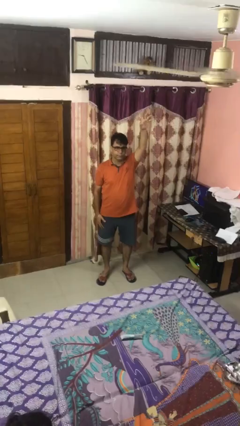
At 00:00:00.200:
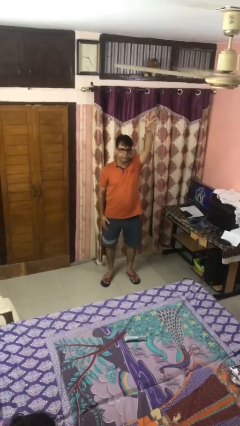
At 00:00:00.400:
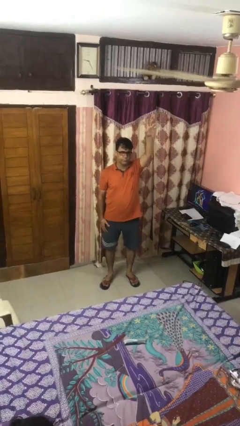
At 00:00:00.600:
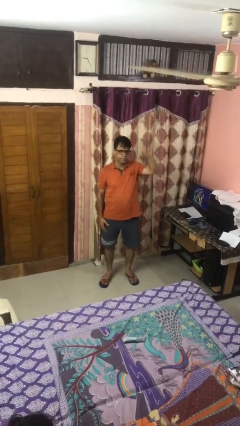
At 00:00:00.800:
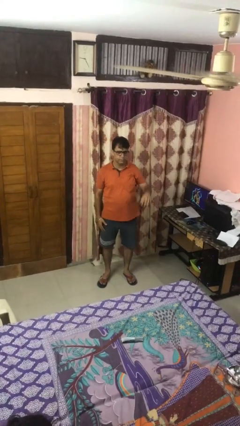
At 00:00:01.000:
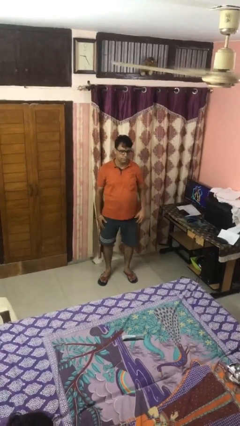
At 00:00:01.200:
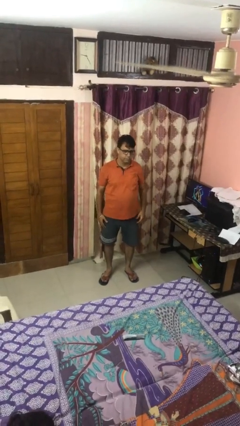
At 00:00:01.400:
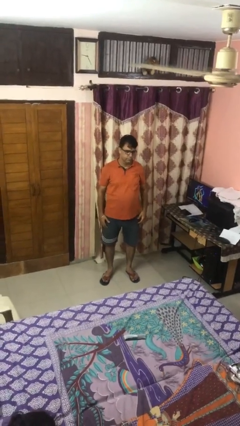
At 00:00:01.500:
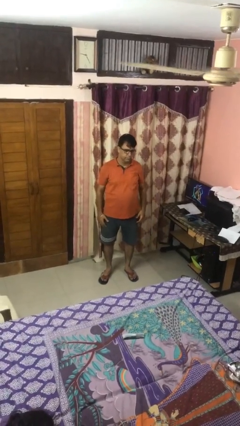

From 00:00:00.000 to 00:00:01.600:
person gestures lower hand

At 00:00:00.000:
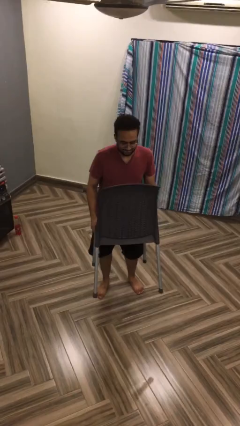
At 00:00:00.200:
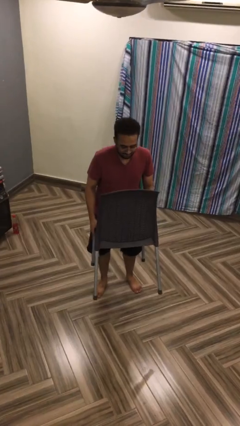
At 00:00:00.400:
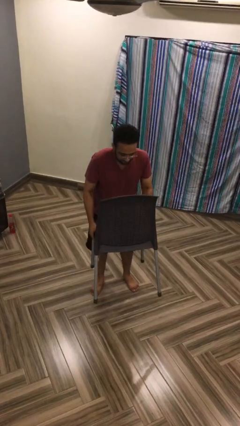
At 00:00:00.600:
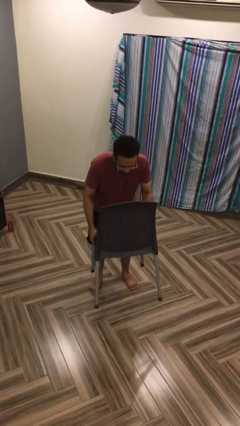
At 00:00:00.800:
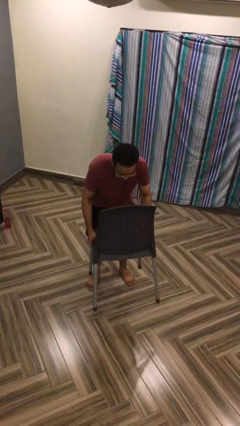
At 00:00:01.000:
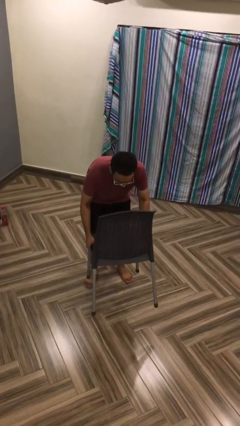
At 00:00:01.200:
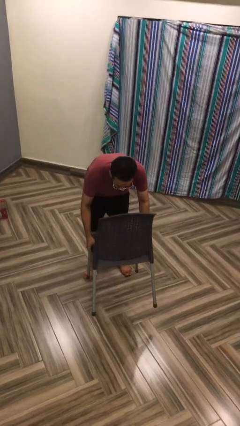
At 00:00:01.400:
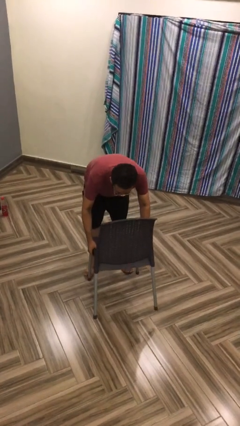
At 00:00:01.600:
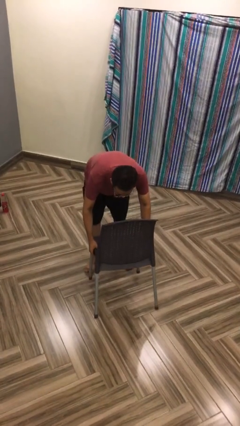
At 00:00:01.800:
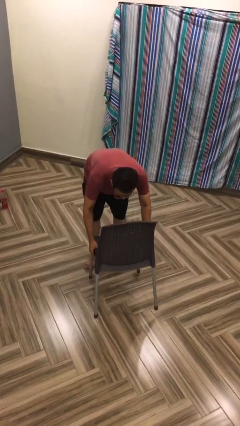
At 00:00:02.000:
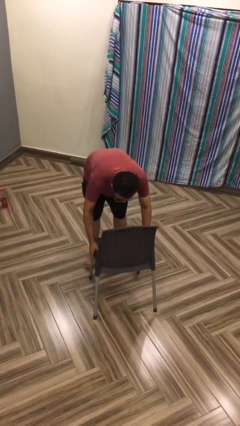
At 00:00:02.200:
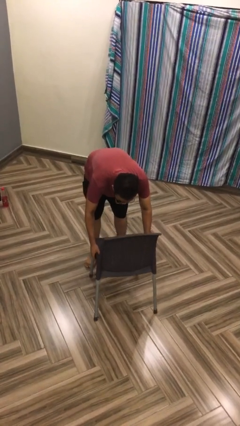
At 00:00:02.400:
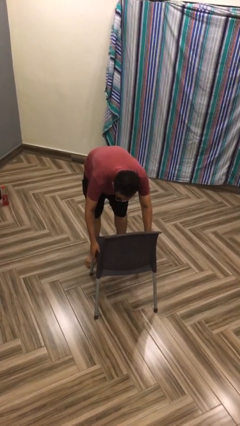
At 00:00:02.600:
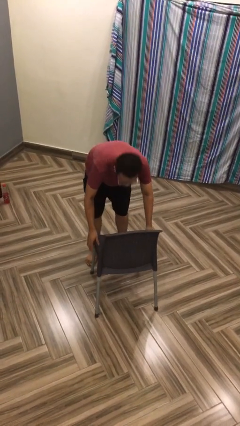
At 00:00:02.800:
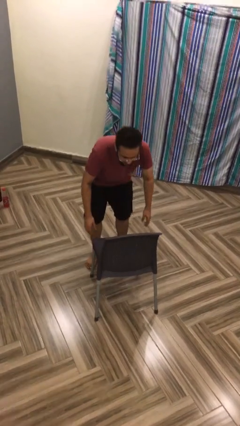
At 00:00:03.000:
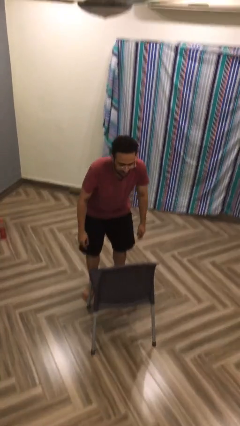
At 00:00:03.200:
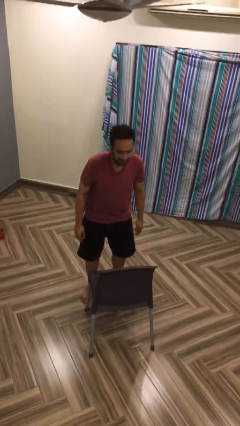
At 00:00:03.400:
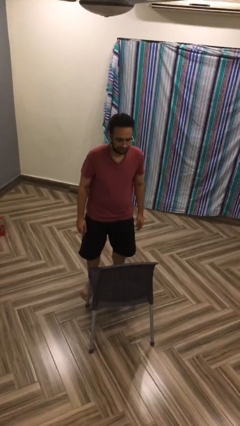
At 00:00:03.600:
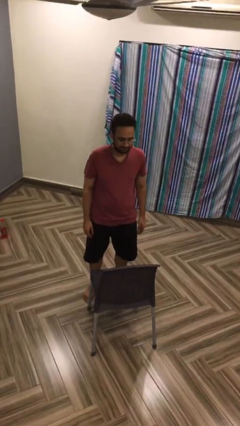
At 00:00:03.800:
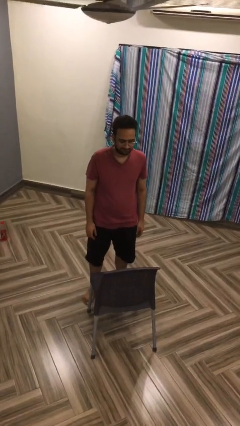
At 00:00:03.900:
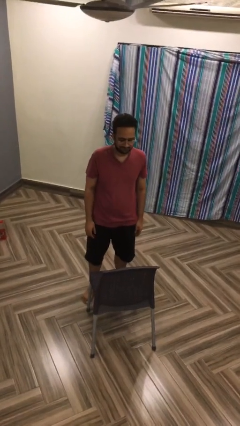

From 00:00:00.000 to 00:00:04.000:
person puts down object on floor

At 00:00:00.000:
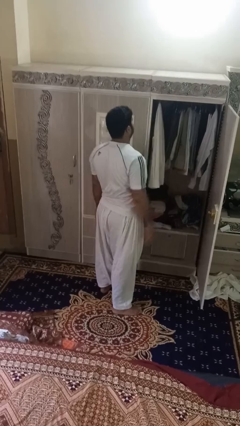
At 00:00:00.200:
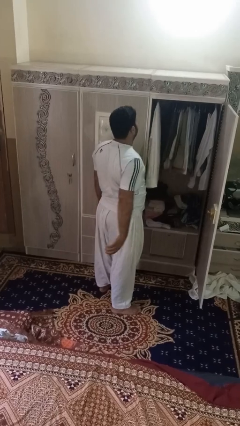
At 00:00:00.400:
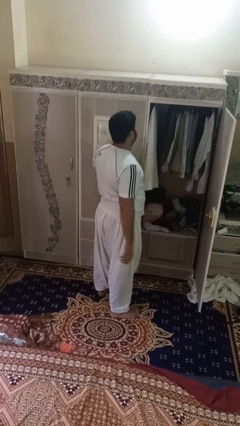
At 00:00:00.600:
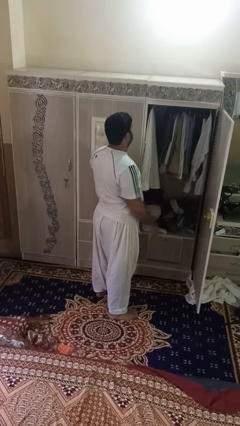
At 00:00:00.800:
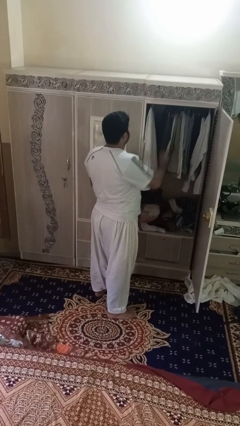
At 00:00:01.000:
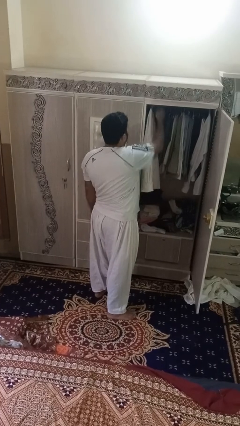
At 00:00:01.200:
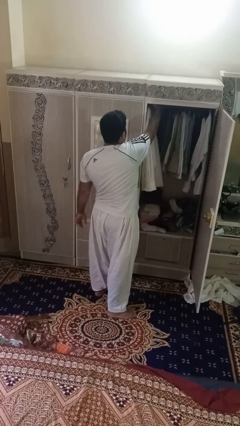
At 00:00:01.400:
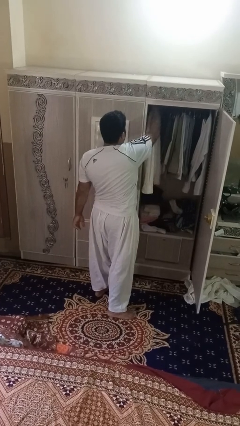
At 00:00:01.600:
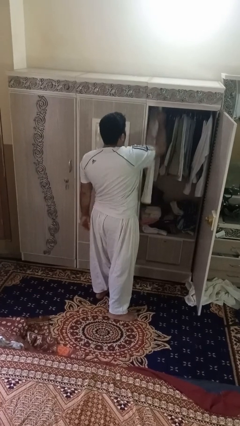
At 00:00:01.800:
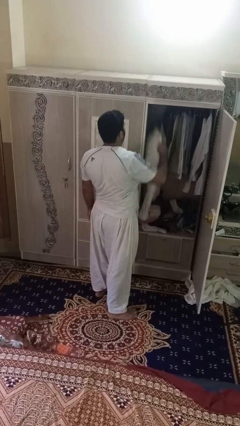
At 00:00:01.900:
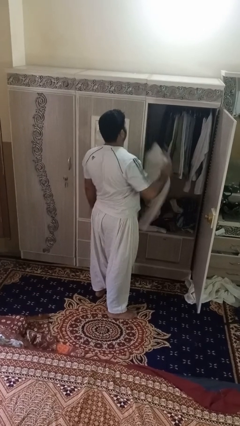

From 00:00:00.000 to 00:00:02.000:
person takes clothes from closet

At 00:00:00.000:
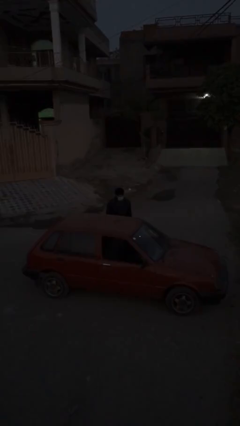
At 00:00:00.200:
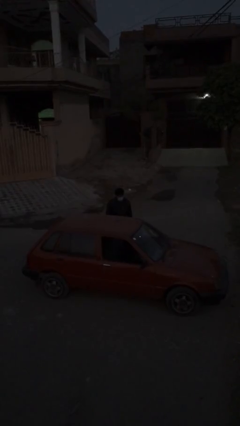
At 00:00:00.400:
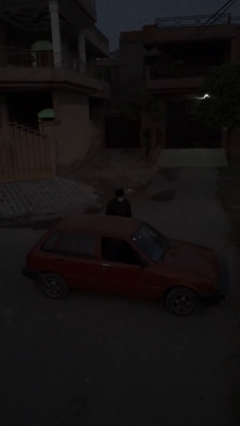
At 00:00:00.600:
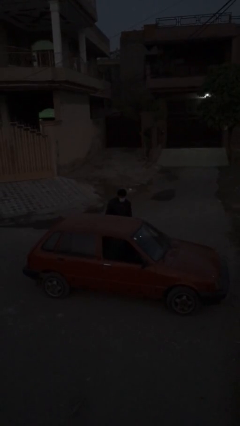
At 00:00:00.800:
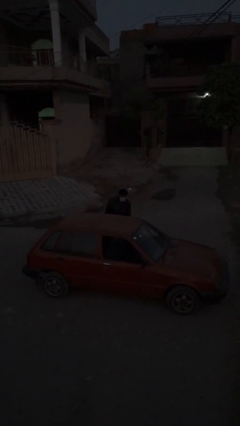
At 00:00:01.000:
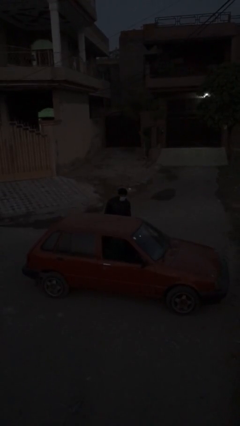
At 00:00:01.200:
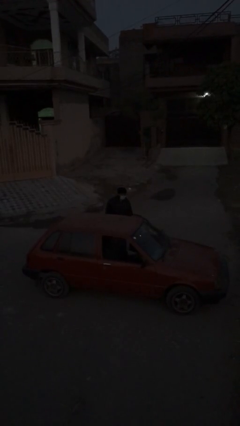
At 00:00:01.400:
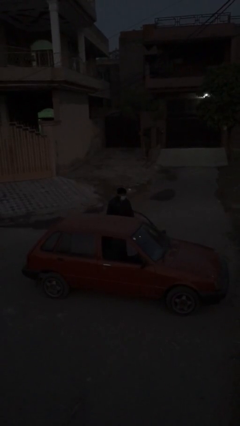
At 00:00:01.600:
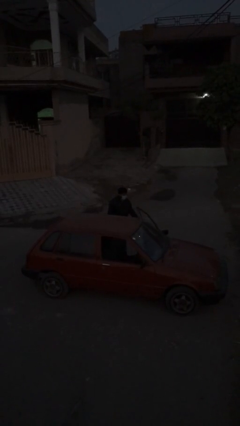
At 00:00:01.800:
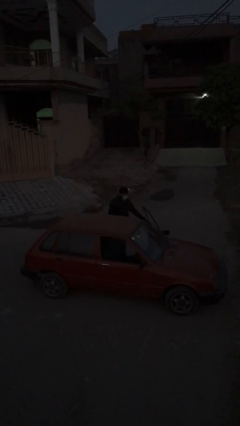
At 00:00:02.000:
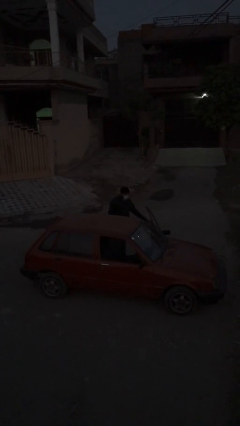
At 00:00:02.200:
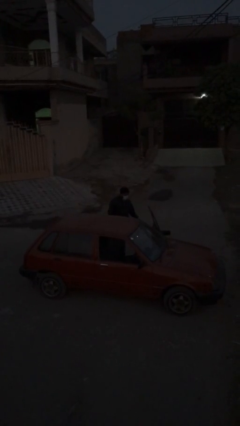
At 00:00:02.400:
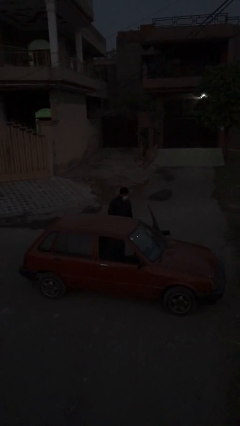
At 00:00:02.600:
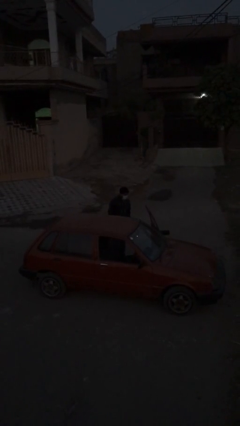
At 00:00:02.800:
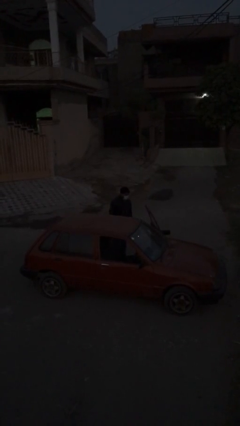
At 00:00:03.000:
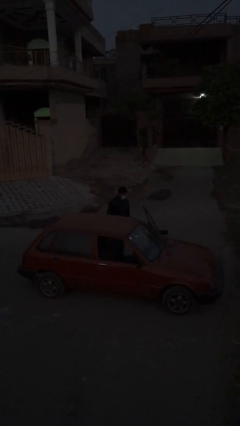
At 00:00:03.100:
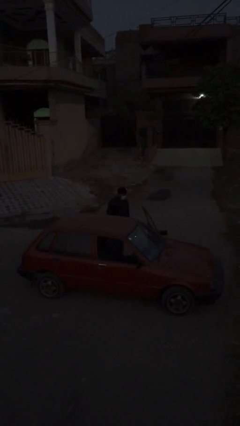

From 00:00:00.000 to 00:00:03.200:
person opens car door

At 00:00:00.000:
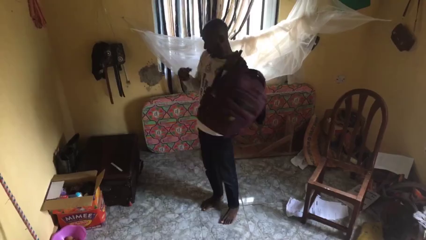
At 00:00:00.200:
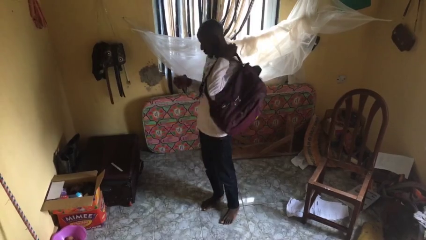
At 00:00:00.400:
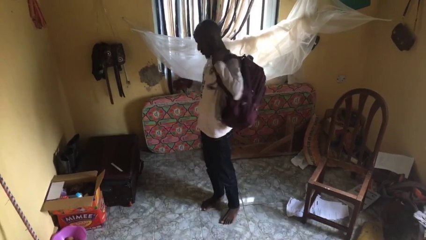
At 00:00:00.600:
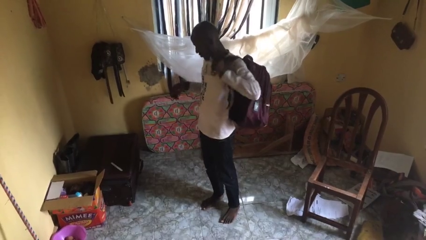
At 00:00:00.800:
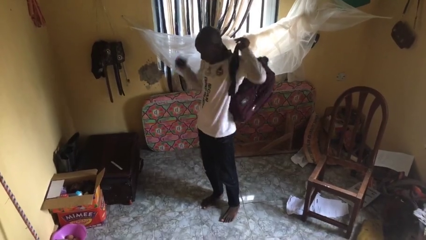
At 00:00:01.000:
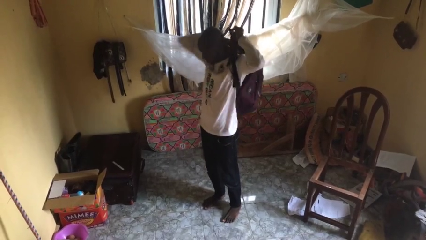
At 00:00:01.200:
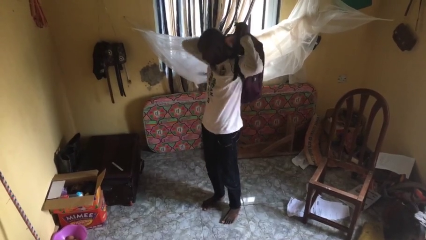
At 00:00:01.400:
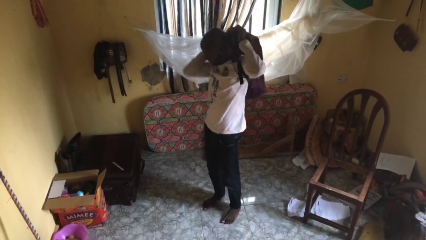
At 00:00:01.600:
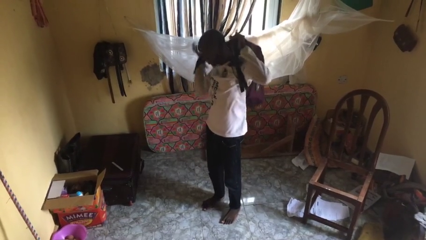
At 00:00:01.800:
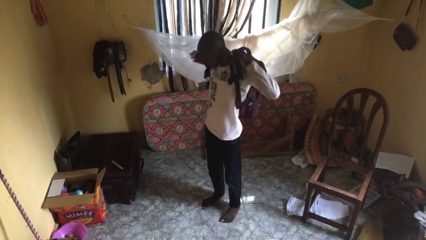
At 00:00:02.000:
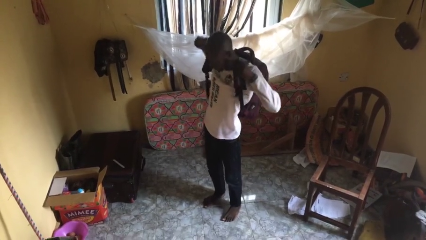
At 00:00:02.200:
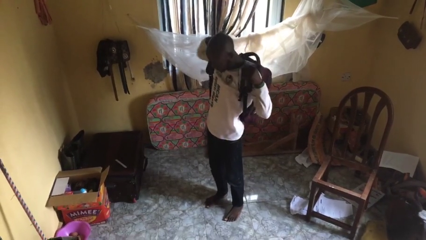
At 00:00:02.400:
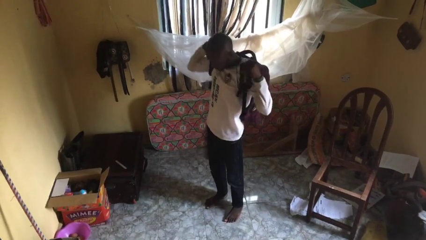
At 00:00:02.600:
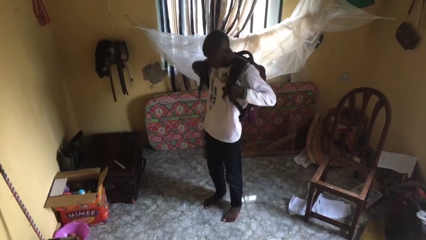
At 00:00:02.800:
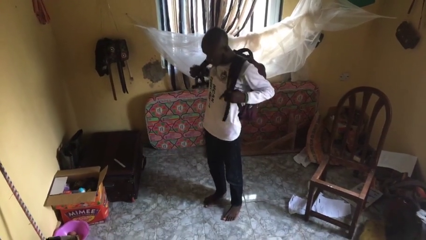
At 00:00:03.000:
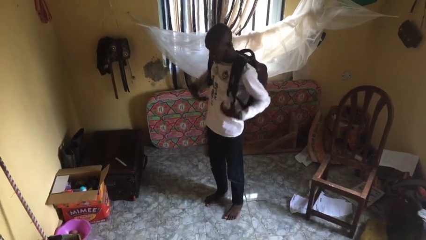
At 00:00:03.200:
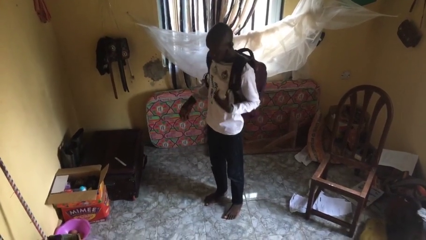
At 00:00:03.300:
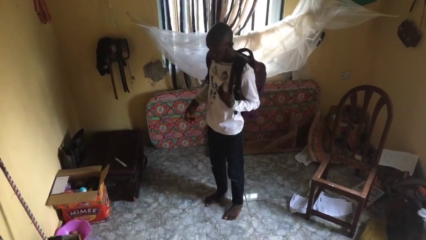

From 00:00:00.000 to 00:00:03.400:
person puts on backpack

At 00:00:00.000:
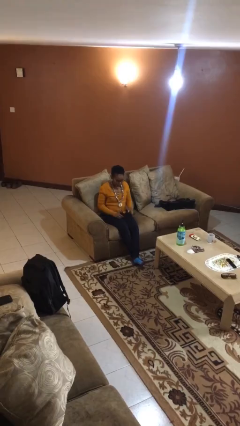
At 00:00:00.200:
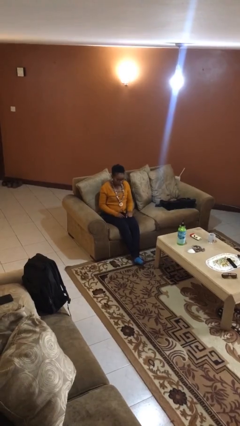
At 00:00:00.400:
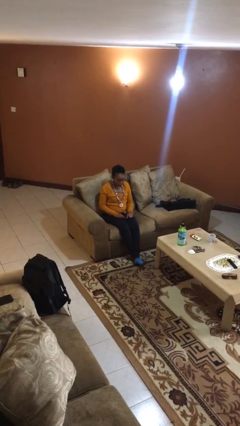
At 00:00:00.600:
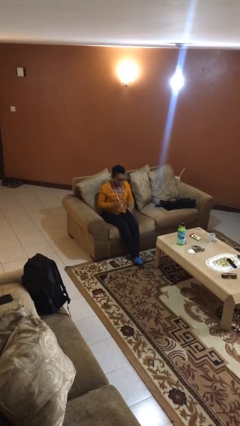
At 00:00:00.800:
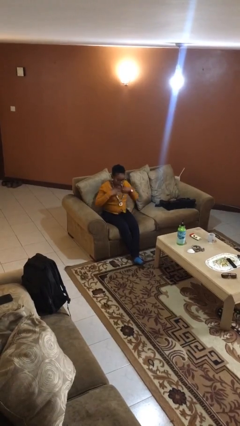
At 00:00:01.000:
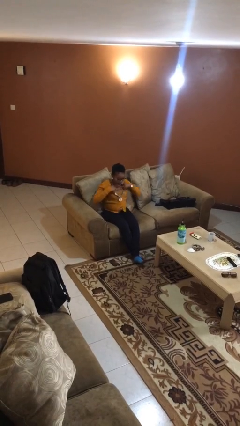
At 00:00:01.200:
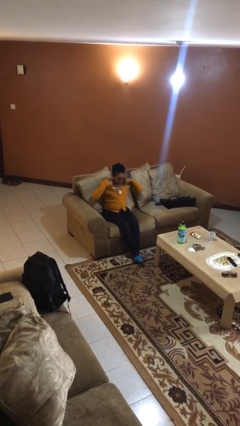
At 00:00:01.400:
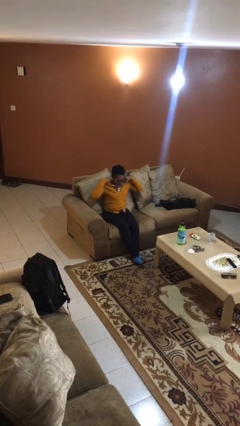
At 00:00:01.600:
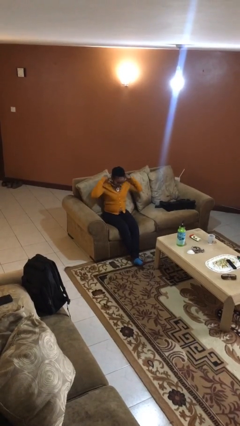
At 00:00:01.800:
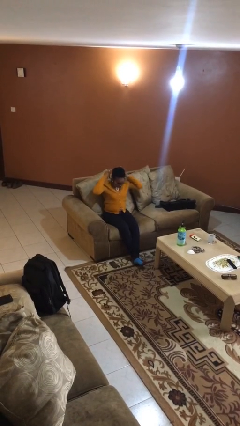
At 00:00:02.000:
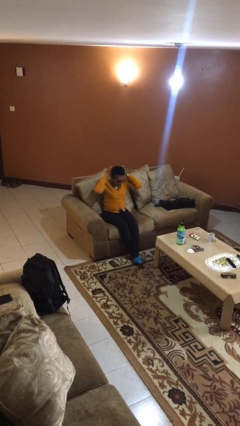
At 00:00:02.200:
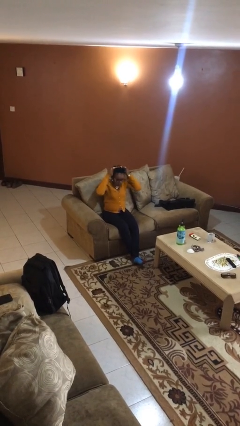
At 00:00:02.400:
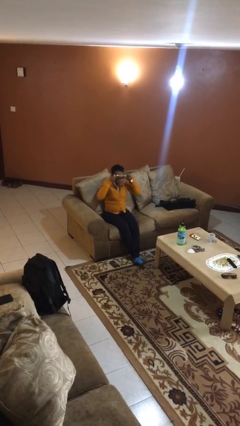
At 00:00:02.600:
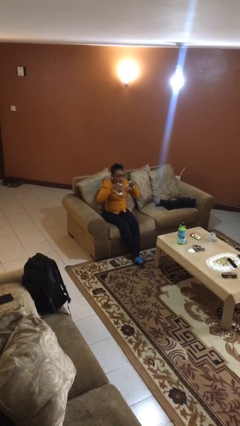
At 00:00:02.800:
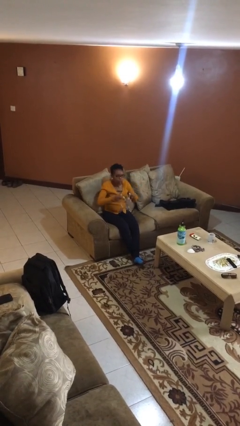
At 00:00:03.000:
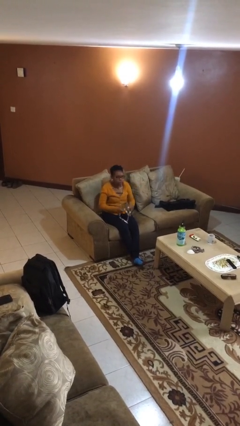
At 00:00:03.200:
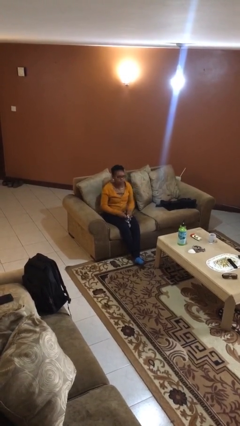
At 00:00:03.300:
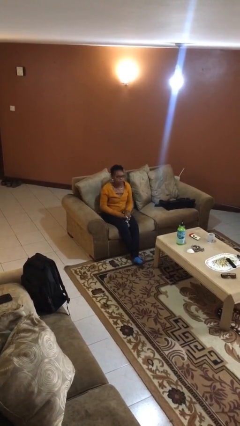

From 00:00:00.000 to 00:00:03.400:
person takes off necklace
